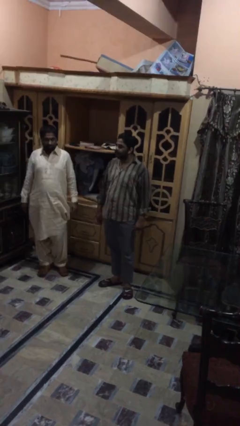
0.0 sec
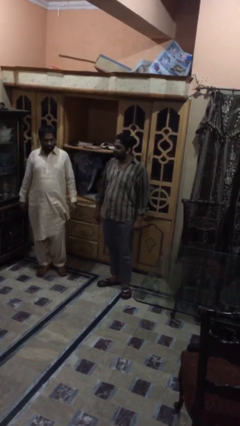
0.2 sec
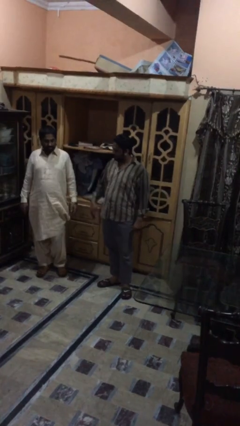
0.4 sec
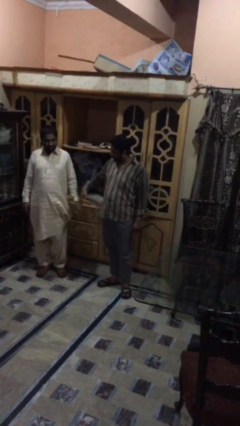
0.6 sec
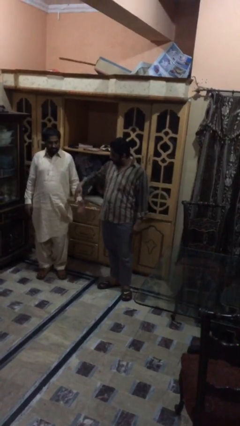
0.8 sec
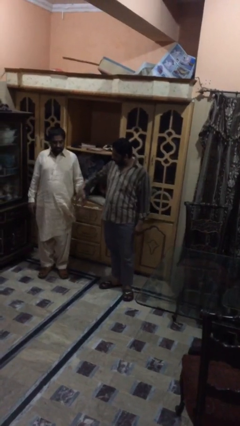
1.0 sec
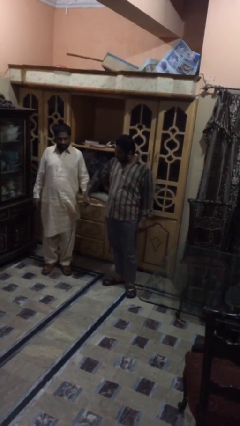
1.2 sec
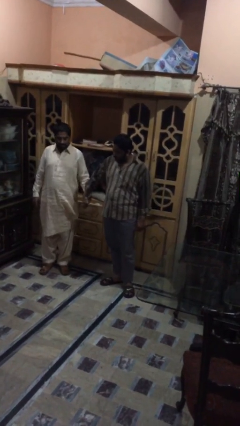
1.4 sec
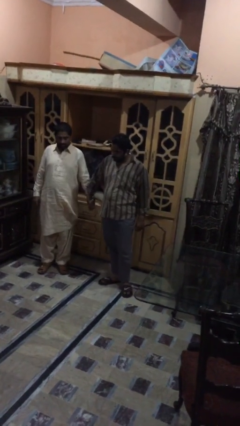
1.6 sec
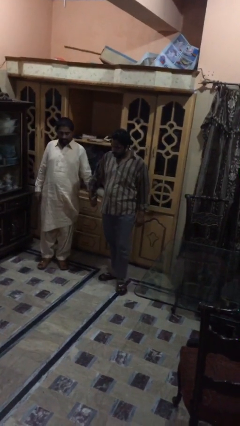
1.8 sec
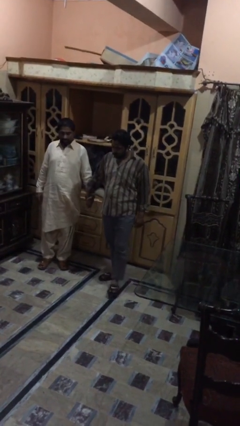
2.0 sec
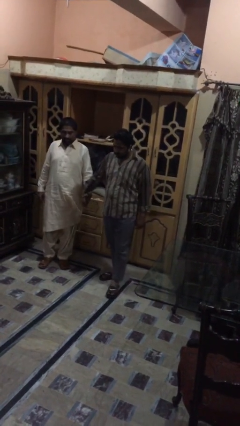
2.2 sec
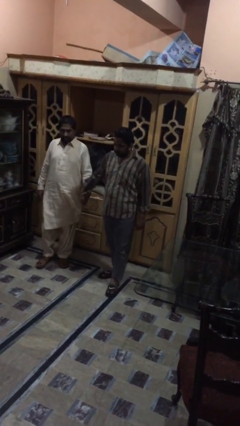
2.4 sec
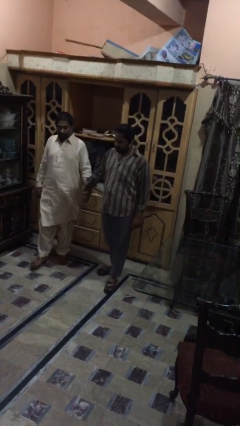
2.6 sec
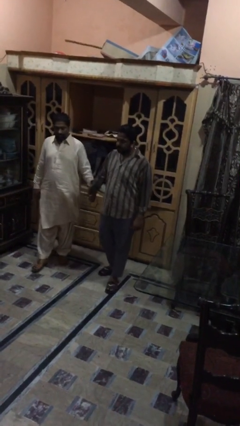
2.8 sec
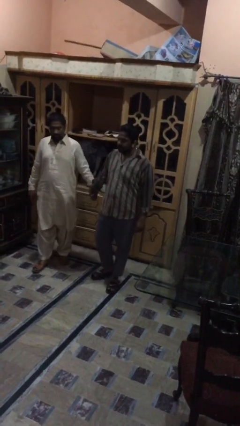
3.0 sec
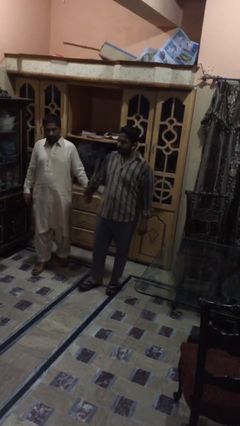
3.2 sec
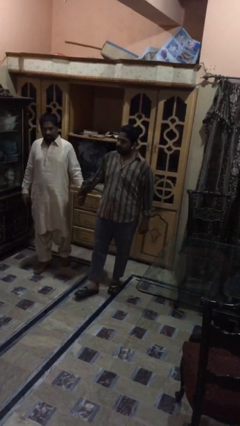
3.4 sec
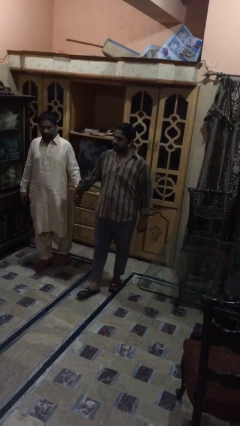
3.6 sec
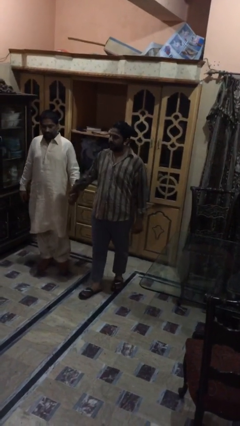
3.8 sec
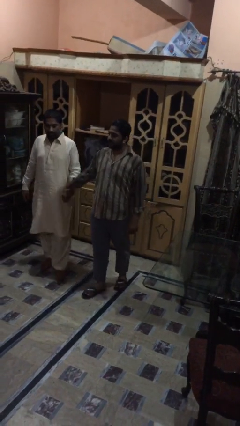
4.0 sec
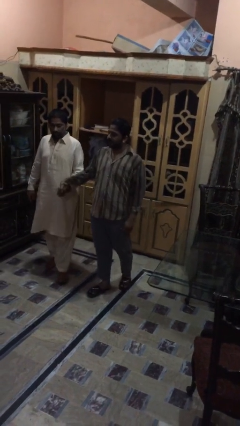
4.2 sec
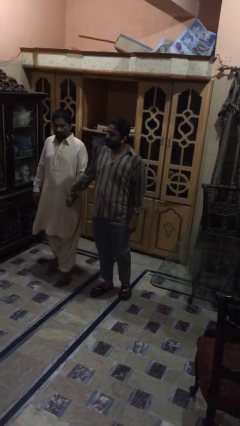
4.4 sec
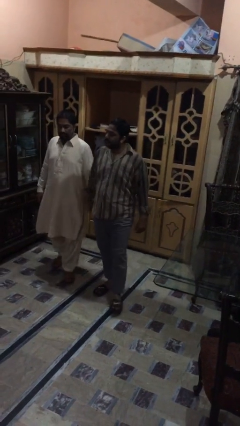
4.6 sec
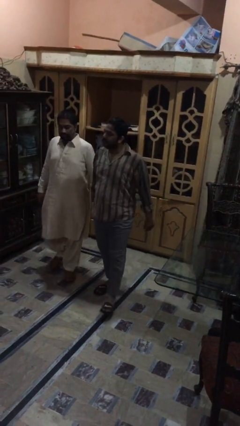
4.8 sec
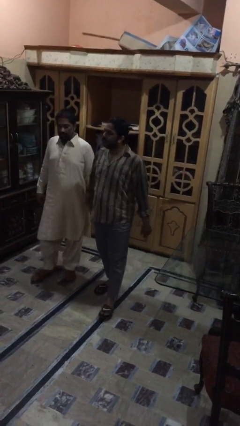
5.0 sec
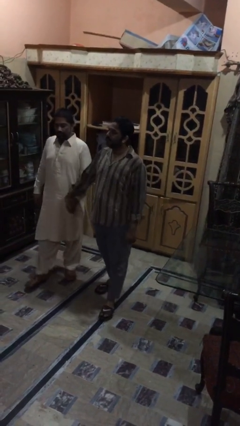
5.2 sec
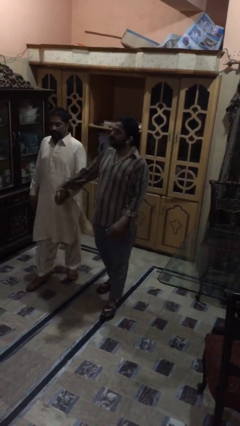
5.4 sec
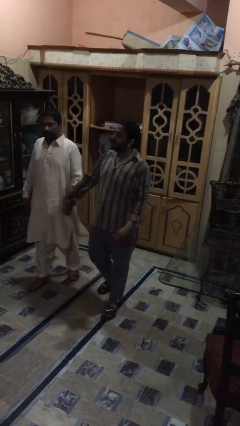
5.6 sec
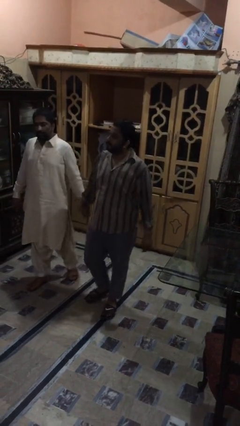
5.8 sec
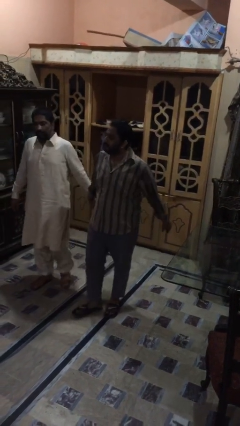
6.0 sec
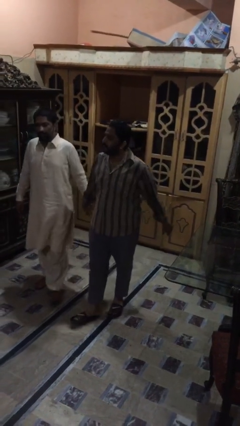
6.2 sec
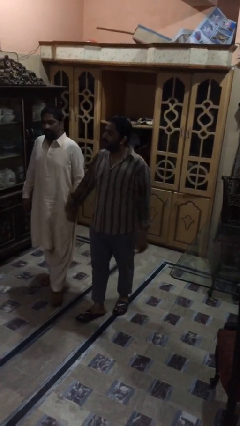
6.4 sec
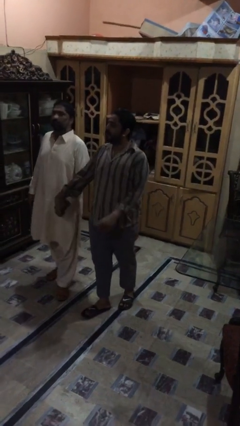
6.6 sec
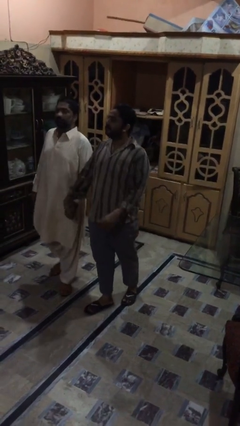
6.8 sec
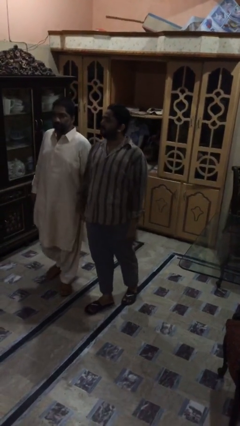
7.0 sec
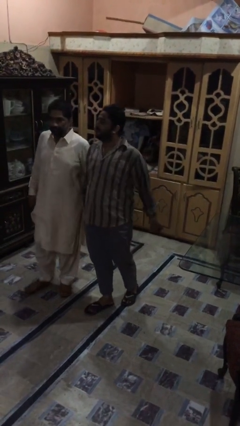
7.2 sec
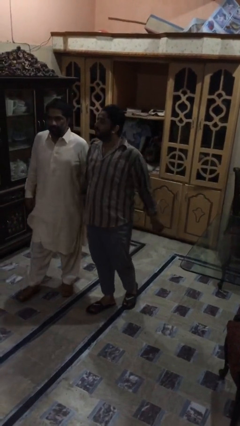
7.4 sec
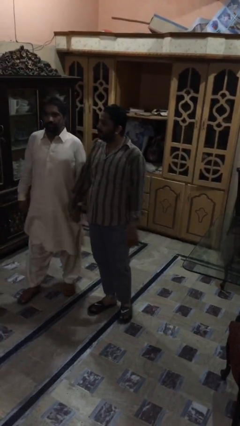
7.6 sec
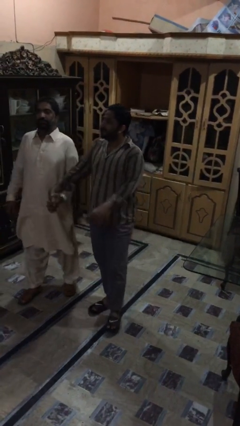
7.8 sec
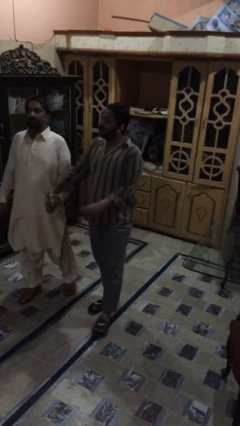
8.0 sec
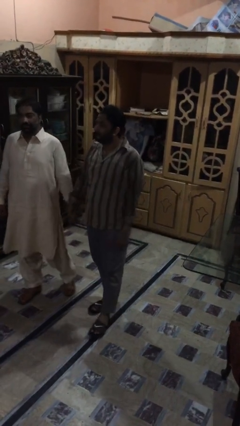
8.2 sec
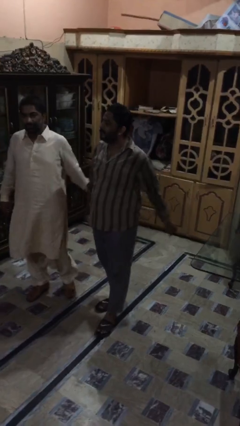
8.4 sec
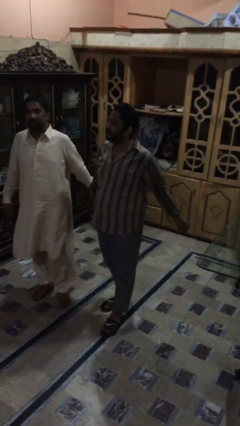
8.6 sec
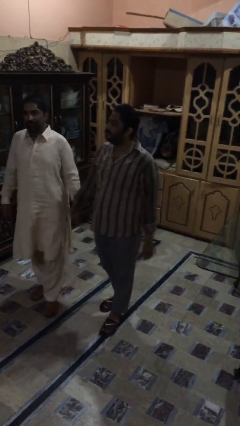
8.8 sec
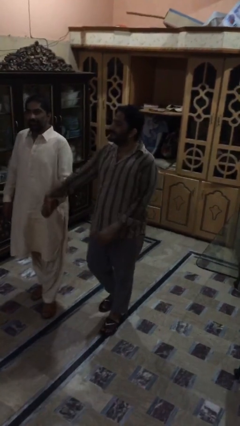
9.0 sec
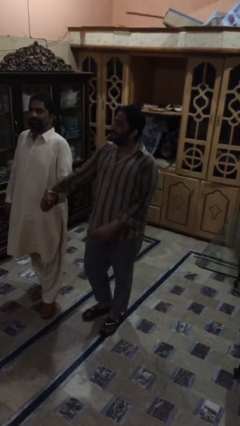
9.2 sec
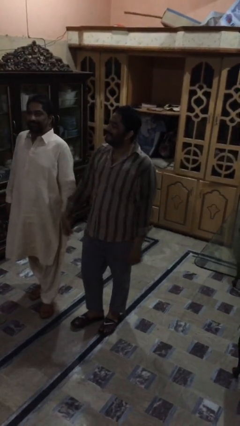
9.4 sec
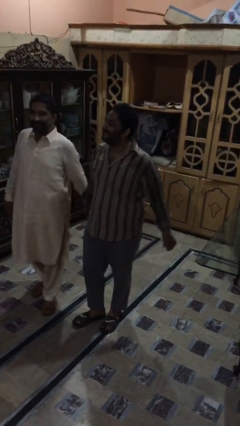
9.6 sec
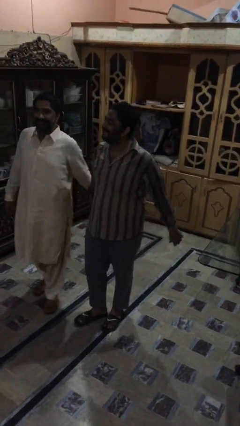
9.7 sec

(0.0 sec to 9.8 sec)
person holds hand

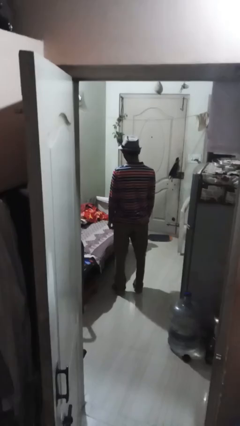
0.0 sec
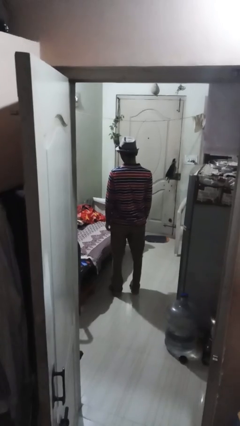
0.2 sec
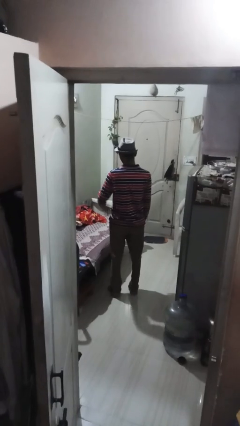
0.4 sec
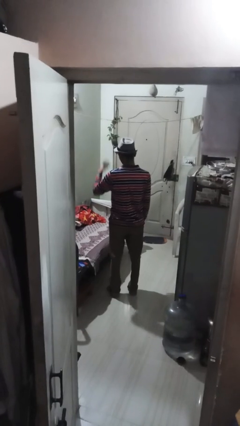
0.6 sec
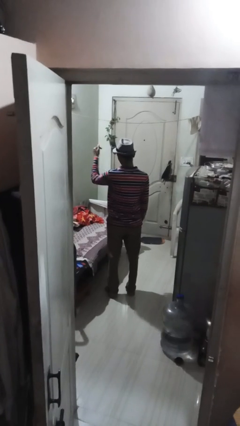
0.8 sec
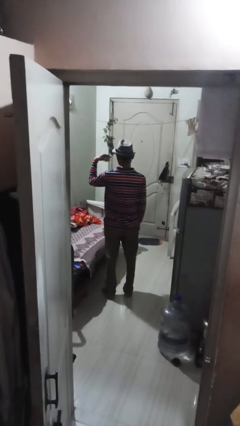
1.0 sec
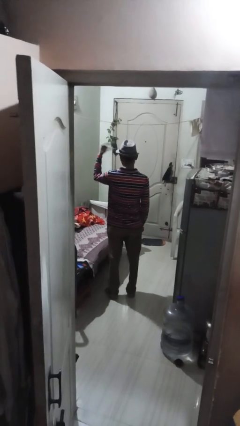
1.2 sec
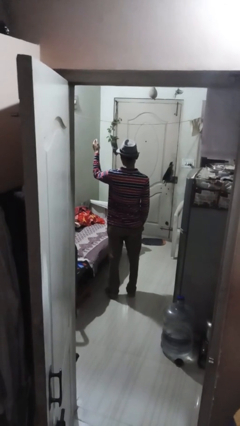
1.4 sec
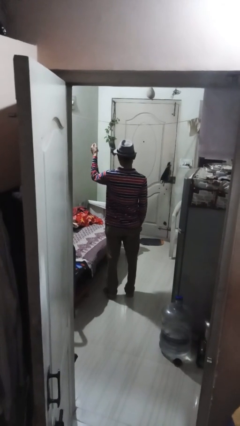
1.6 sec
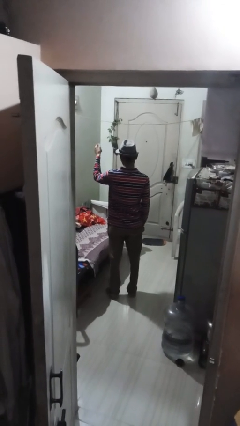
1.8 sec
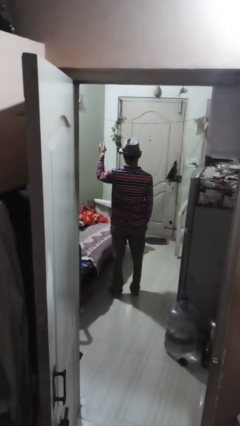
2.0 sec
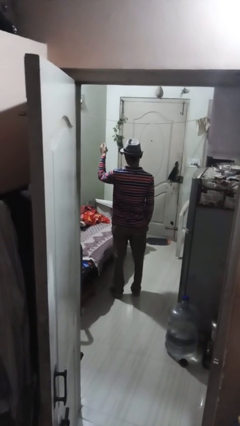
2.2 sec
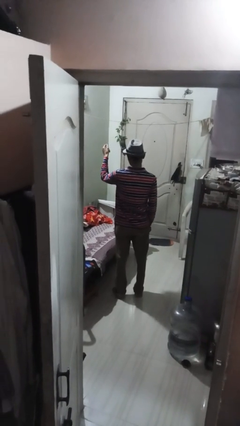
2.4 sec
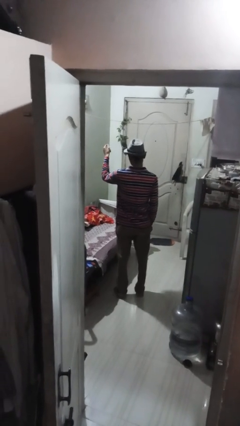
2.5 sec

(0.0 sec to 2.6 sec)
person snaps fingers

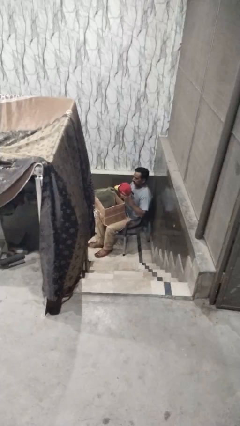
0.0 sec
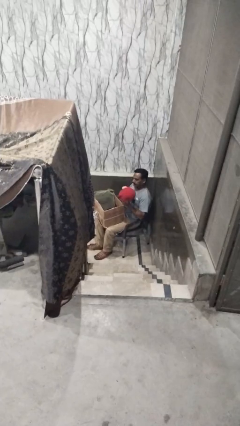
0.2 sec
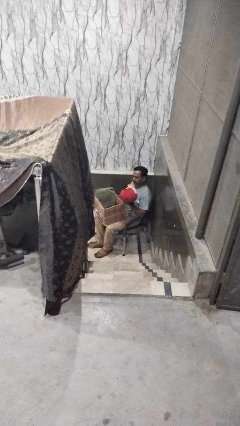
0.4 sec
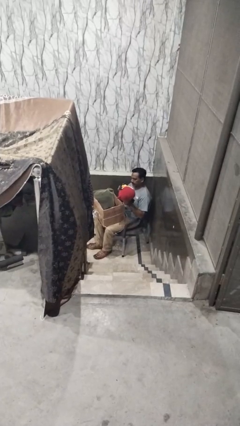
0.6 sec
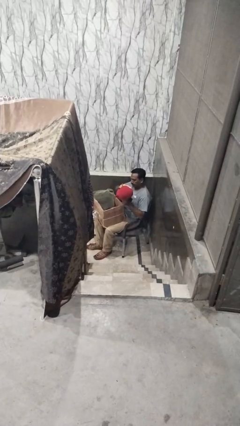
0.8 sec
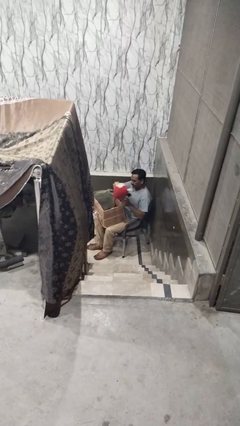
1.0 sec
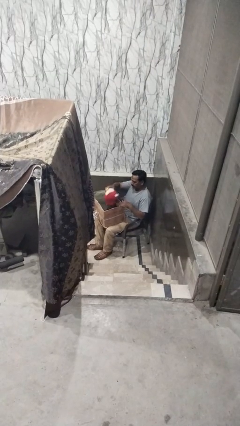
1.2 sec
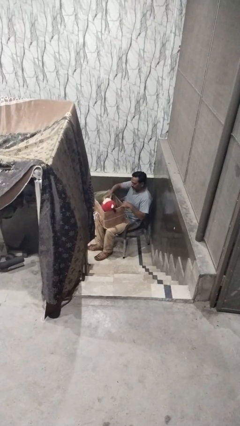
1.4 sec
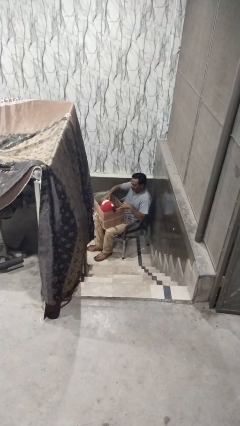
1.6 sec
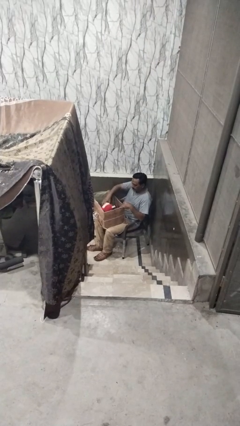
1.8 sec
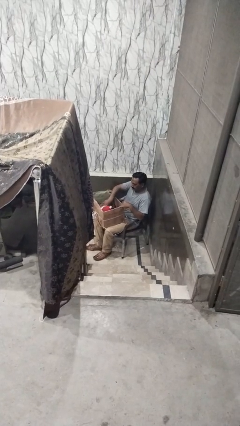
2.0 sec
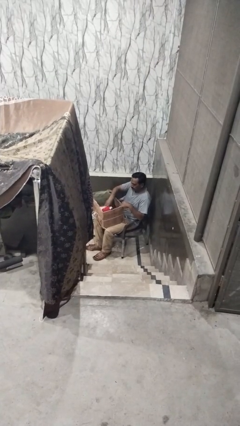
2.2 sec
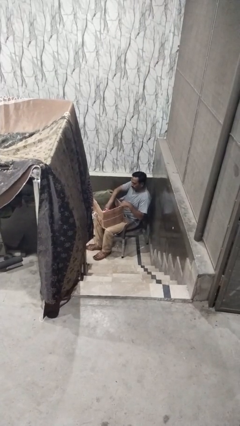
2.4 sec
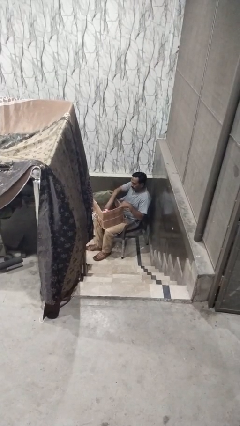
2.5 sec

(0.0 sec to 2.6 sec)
person puts object into box

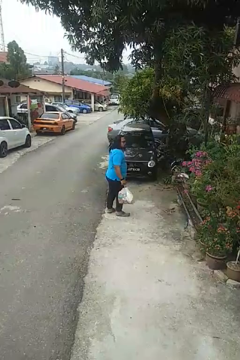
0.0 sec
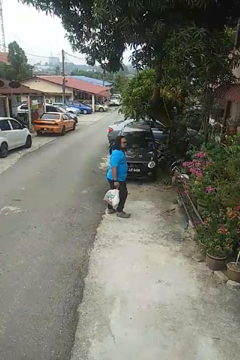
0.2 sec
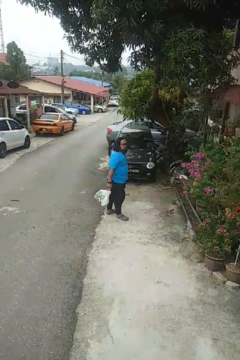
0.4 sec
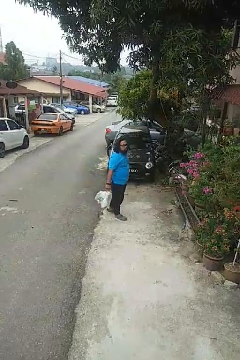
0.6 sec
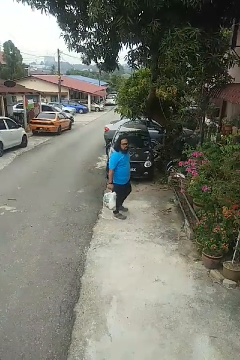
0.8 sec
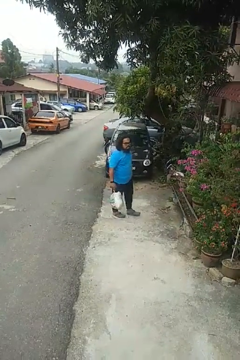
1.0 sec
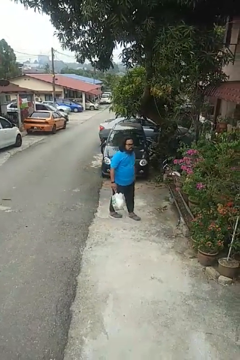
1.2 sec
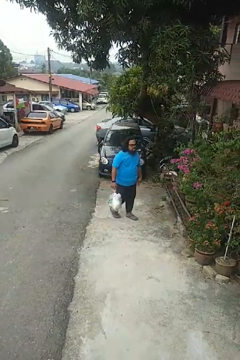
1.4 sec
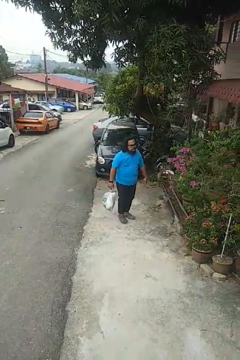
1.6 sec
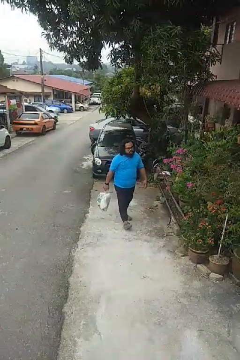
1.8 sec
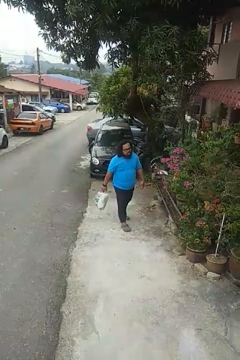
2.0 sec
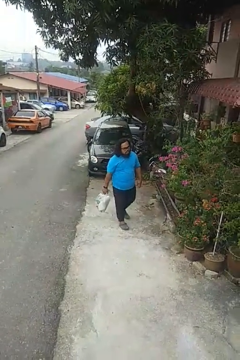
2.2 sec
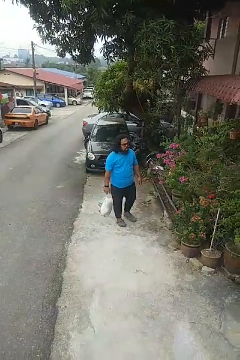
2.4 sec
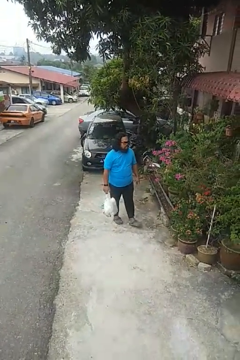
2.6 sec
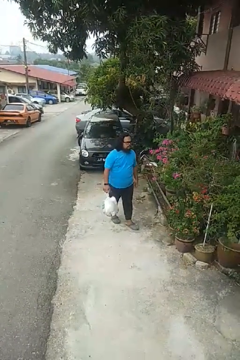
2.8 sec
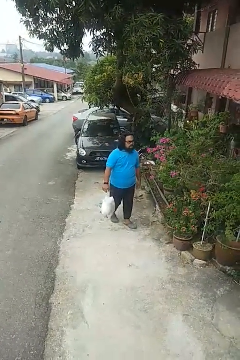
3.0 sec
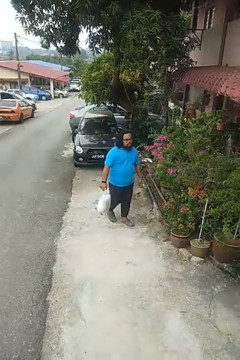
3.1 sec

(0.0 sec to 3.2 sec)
person carries groceries
